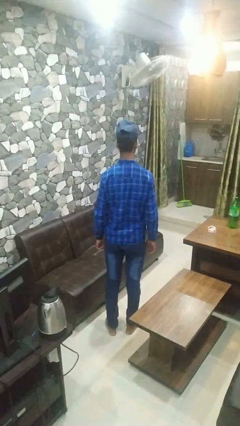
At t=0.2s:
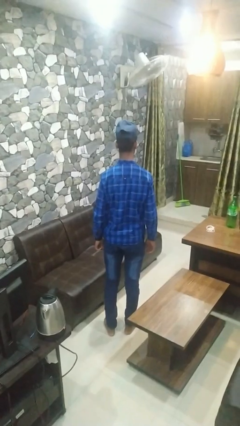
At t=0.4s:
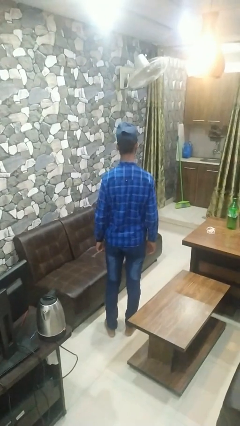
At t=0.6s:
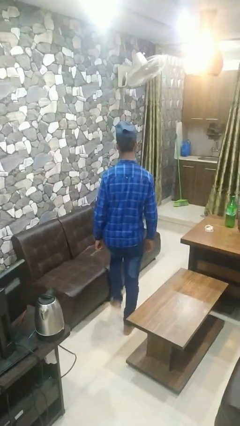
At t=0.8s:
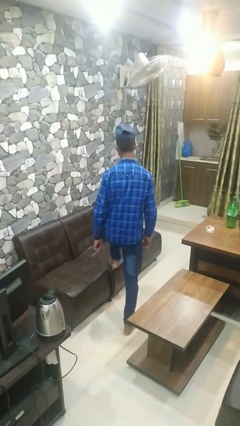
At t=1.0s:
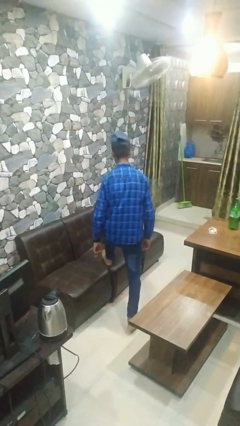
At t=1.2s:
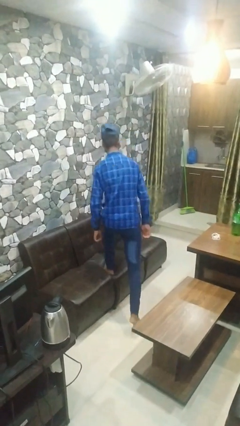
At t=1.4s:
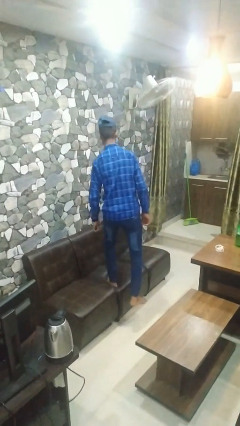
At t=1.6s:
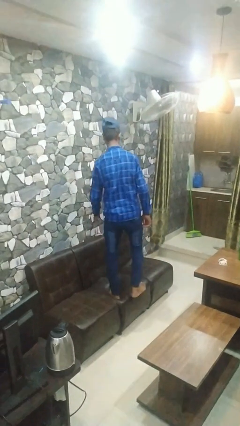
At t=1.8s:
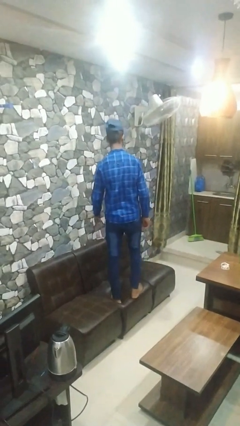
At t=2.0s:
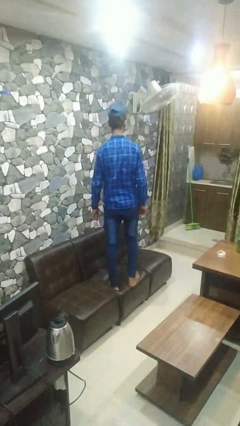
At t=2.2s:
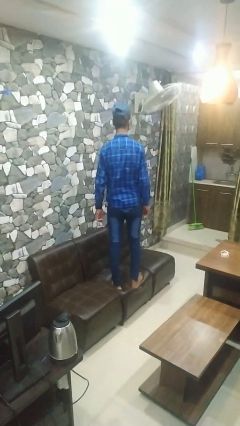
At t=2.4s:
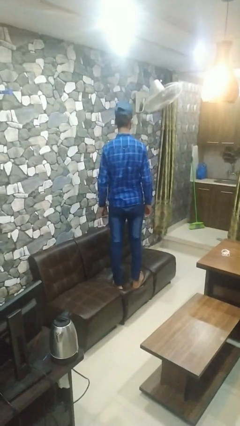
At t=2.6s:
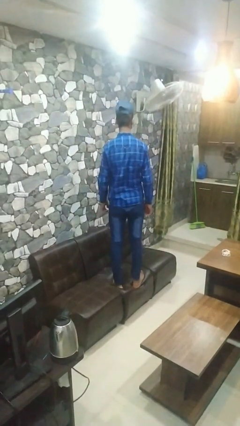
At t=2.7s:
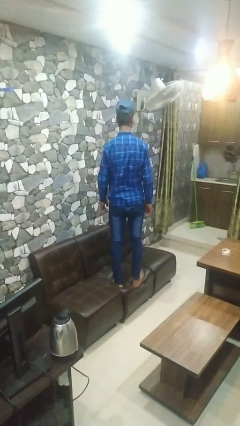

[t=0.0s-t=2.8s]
person climbs on couch

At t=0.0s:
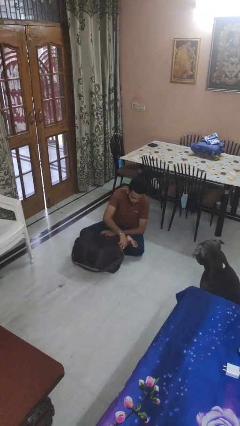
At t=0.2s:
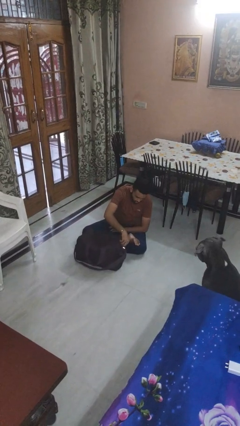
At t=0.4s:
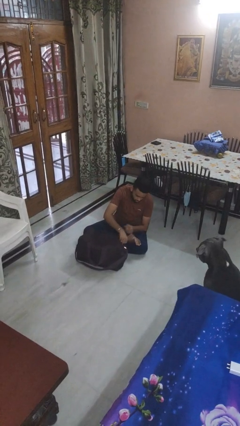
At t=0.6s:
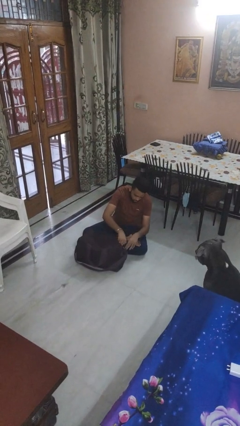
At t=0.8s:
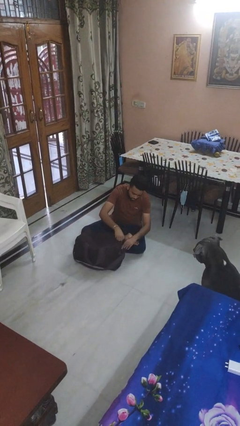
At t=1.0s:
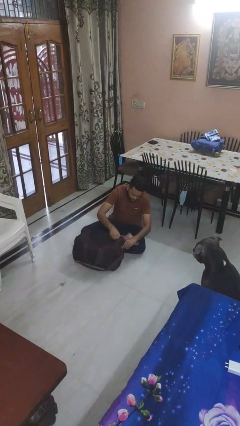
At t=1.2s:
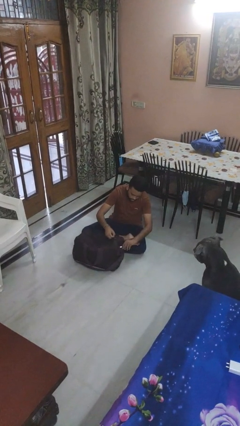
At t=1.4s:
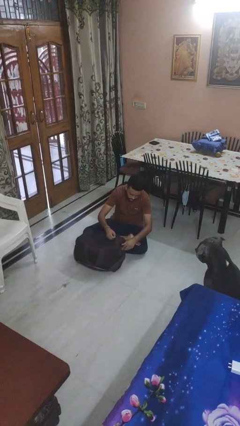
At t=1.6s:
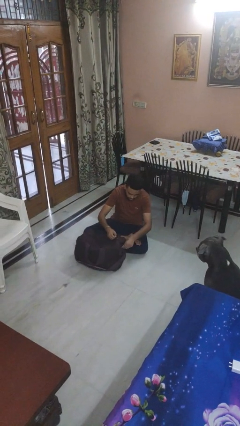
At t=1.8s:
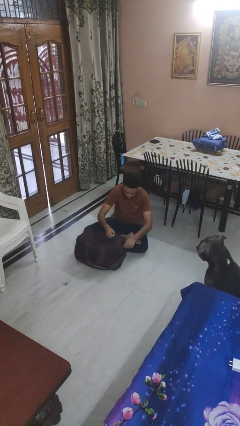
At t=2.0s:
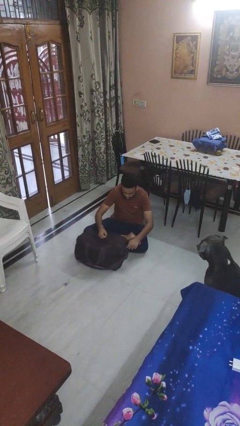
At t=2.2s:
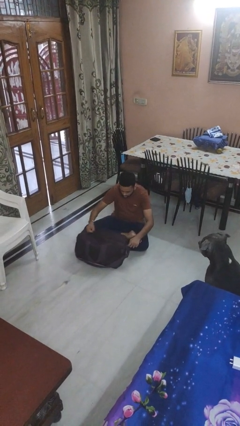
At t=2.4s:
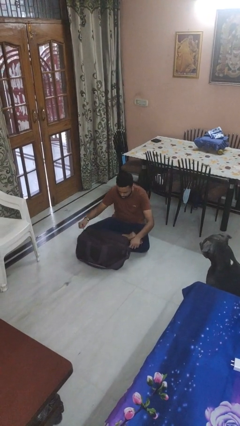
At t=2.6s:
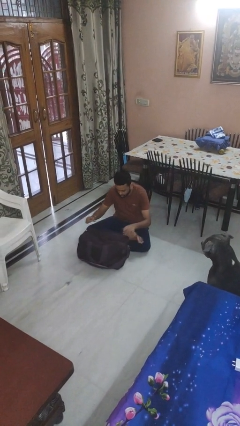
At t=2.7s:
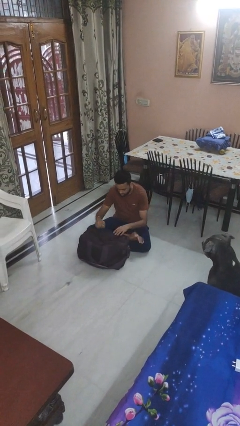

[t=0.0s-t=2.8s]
person opens suitcase

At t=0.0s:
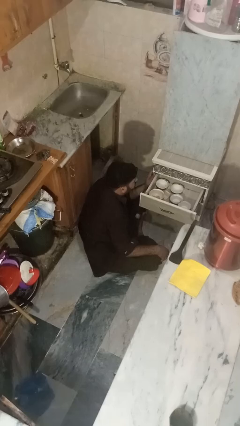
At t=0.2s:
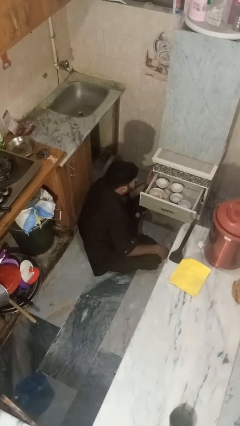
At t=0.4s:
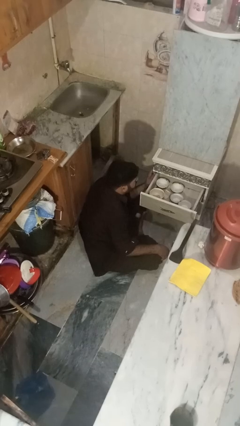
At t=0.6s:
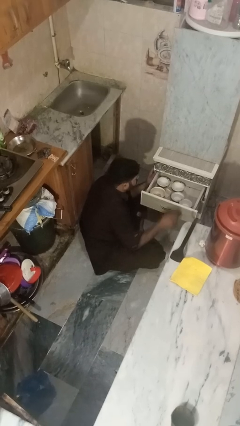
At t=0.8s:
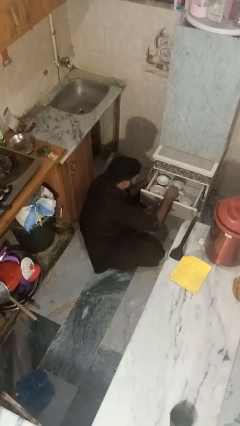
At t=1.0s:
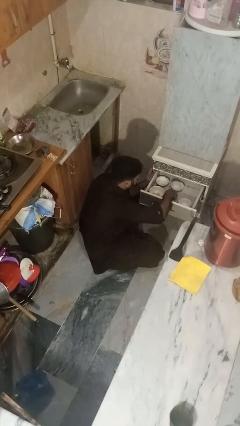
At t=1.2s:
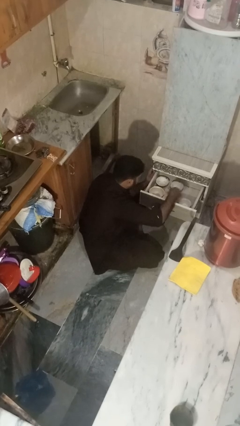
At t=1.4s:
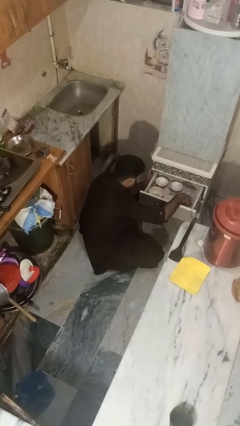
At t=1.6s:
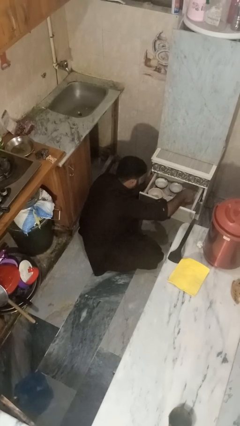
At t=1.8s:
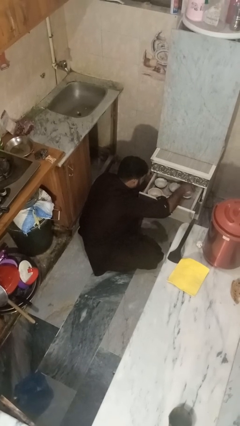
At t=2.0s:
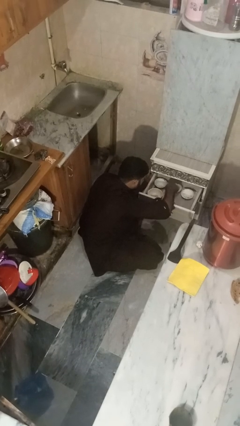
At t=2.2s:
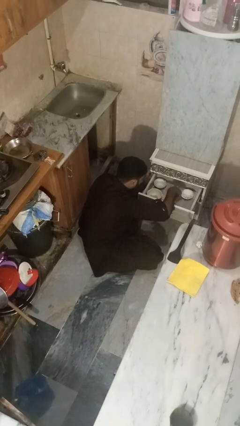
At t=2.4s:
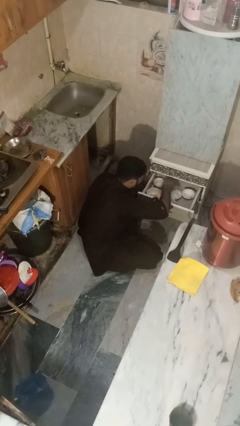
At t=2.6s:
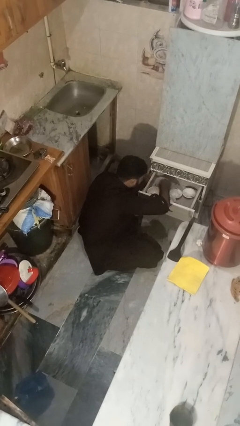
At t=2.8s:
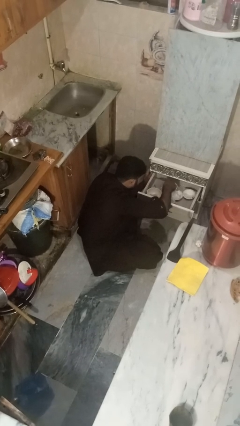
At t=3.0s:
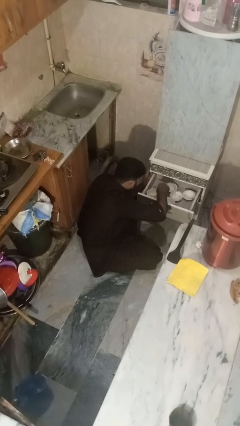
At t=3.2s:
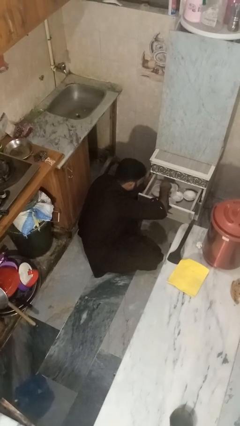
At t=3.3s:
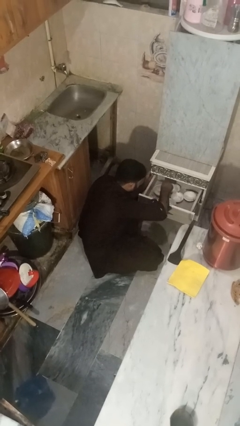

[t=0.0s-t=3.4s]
person searches in kitchen drawer

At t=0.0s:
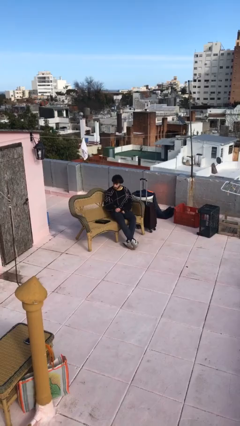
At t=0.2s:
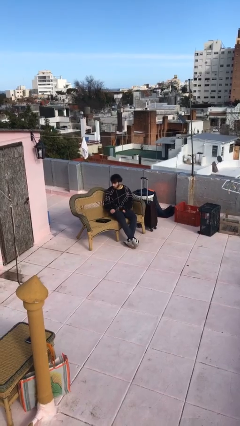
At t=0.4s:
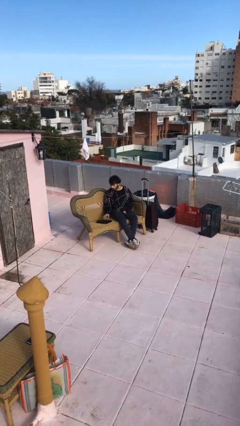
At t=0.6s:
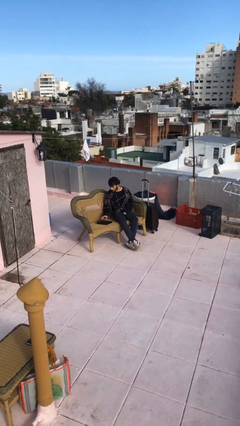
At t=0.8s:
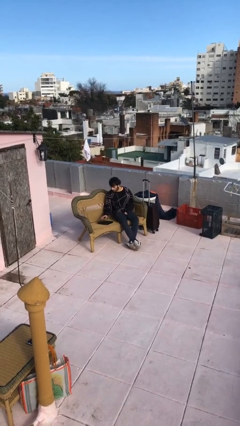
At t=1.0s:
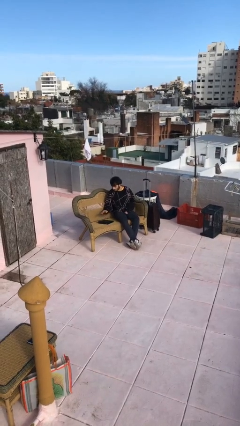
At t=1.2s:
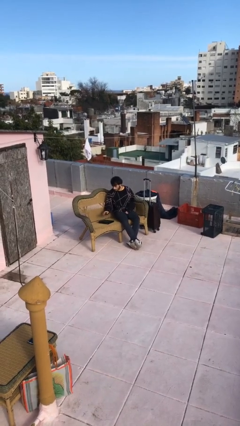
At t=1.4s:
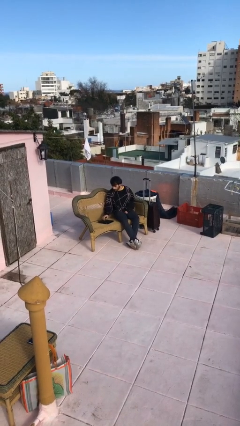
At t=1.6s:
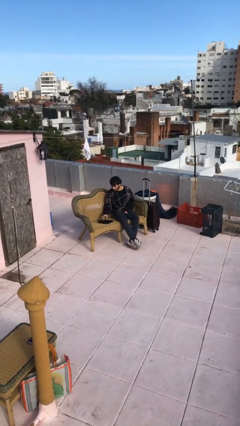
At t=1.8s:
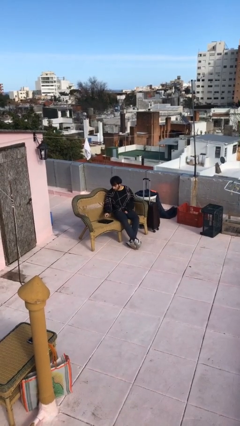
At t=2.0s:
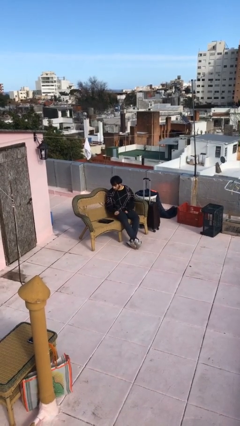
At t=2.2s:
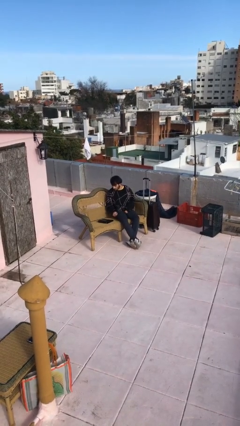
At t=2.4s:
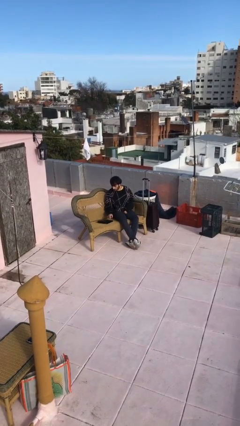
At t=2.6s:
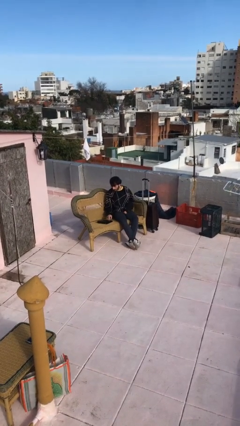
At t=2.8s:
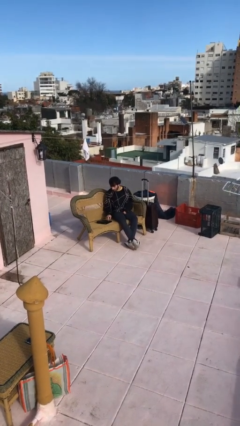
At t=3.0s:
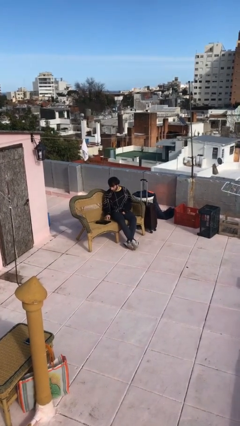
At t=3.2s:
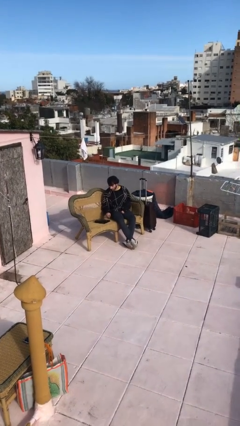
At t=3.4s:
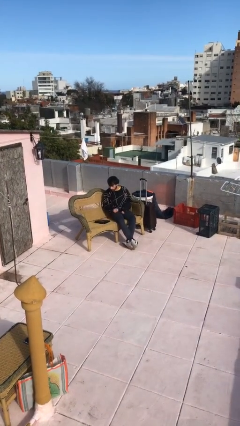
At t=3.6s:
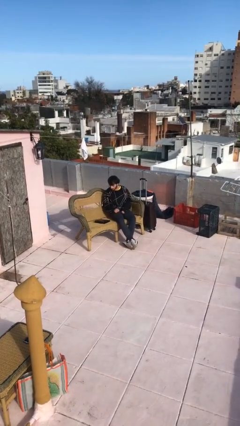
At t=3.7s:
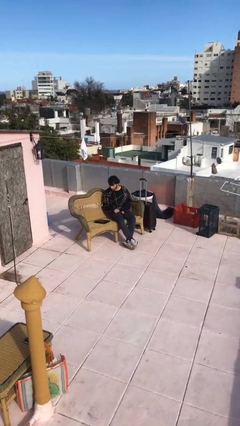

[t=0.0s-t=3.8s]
person taps object with finger

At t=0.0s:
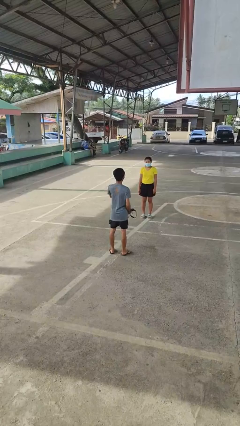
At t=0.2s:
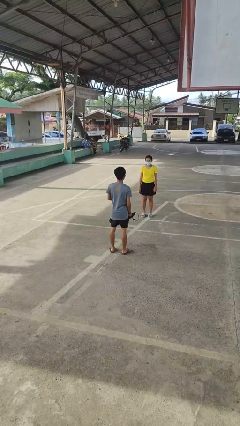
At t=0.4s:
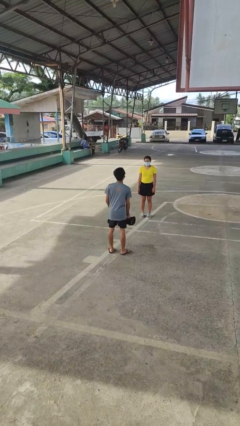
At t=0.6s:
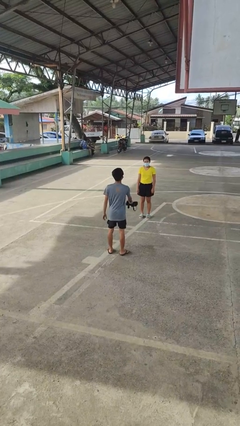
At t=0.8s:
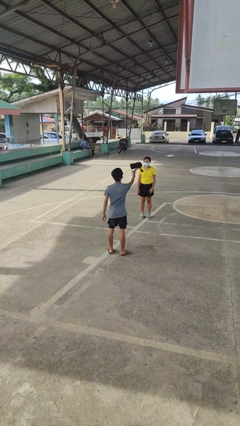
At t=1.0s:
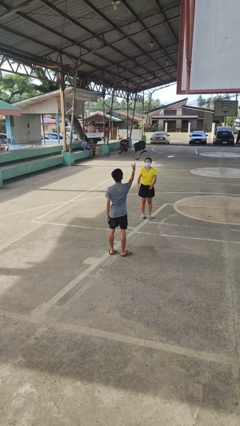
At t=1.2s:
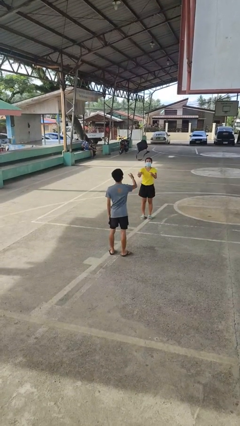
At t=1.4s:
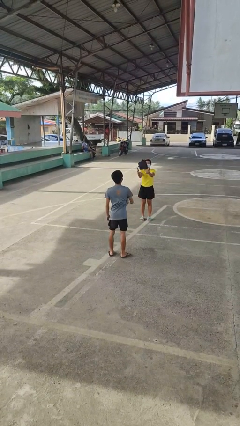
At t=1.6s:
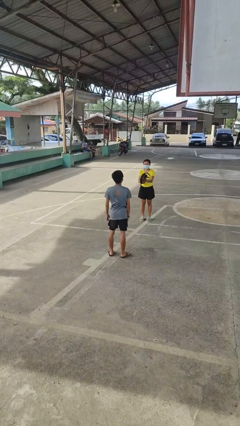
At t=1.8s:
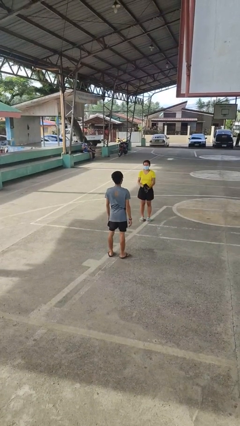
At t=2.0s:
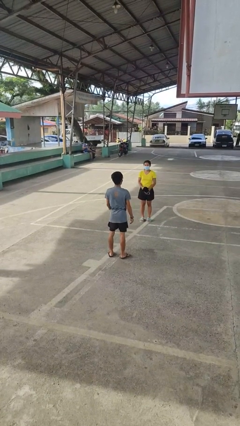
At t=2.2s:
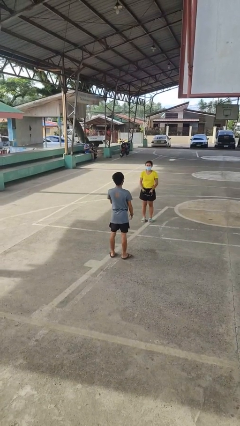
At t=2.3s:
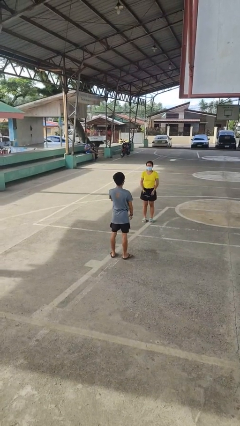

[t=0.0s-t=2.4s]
person throws object to person

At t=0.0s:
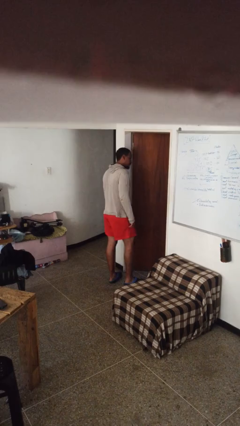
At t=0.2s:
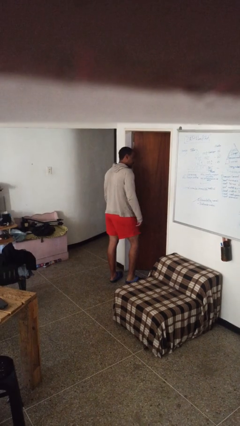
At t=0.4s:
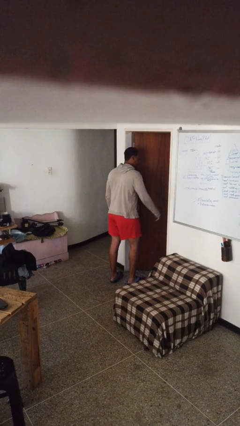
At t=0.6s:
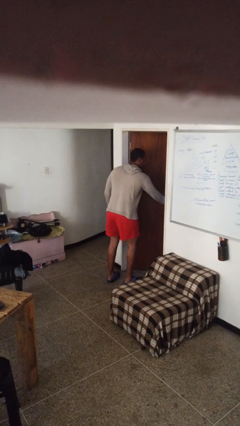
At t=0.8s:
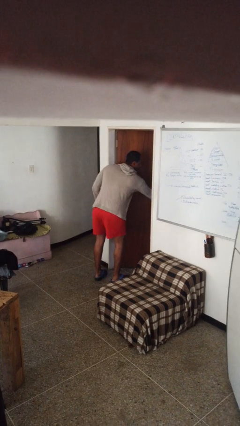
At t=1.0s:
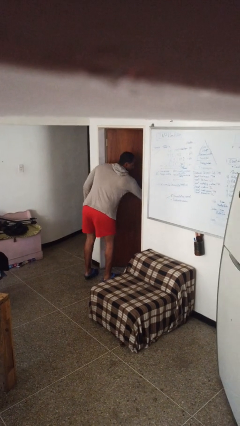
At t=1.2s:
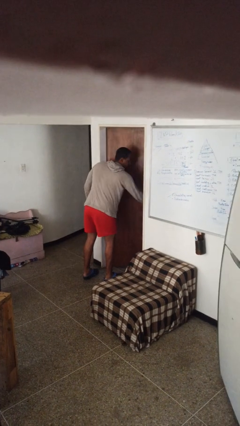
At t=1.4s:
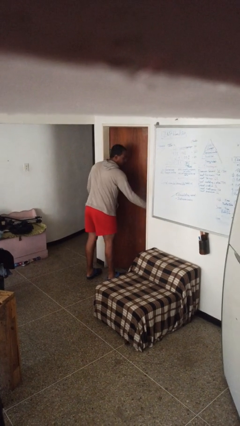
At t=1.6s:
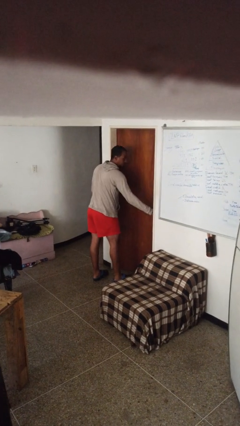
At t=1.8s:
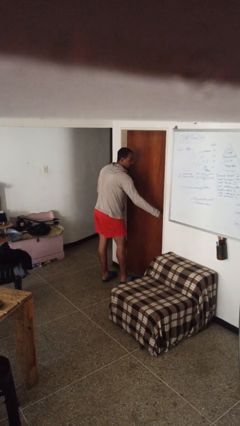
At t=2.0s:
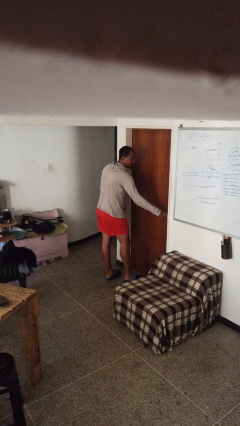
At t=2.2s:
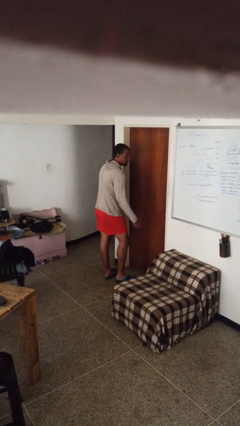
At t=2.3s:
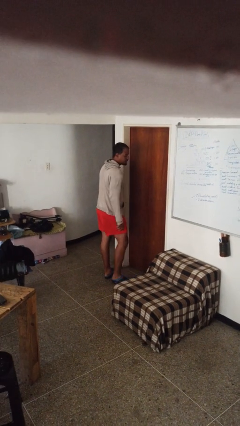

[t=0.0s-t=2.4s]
person closes facility door
